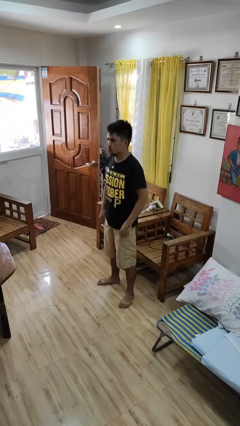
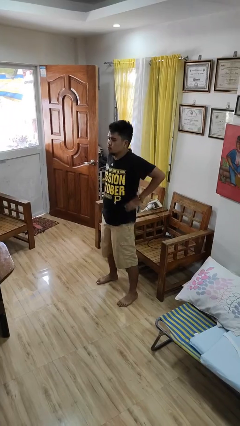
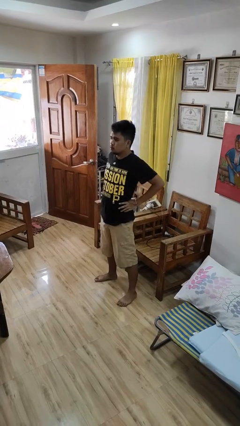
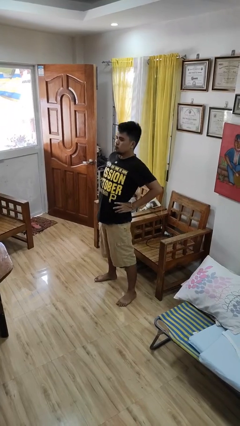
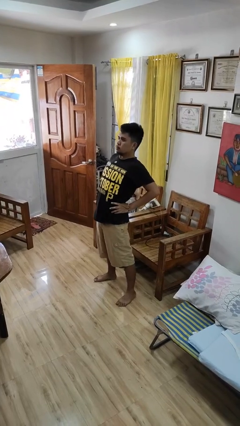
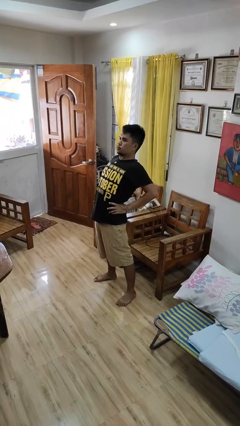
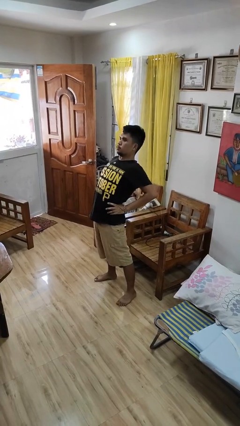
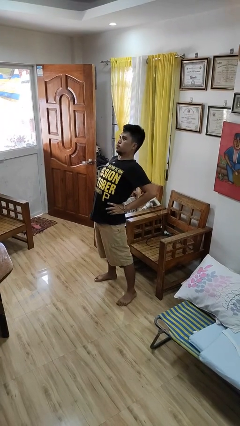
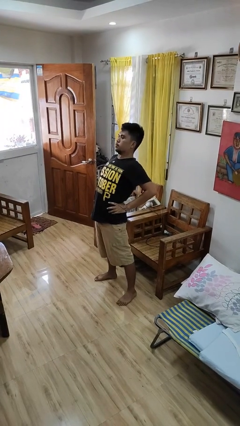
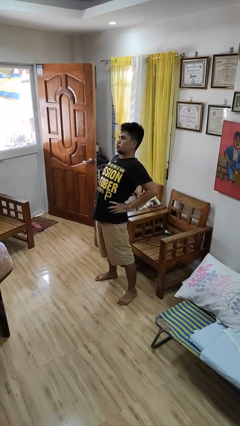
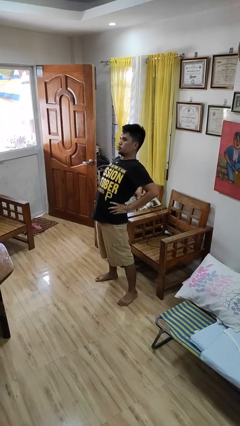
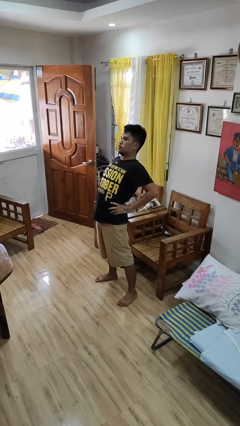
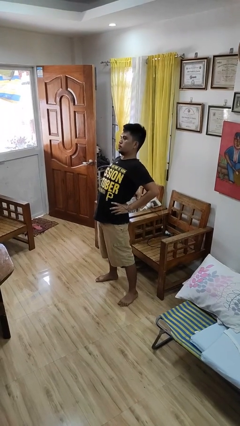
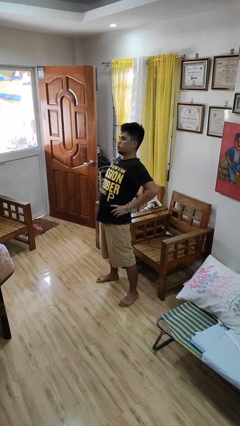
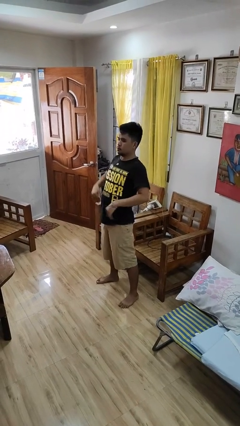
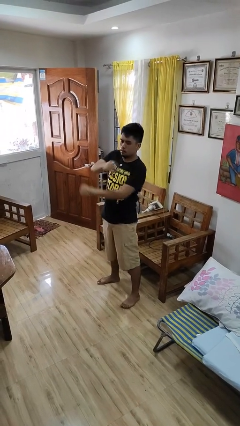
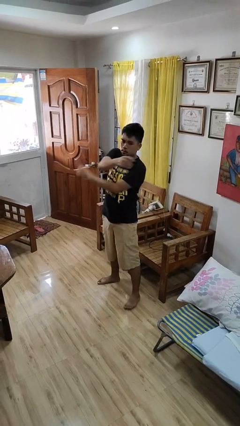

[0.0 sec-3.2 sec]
person stretches back

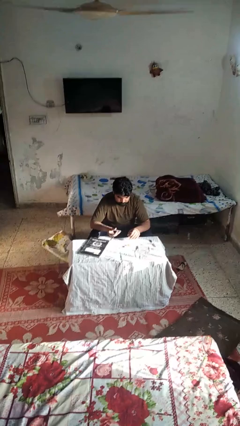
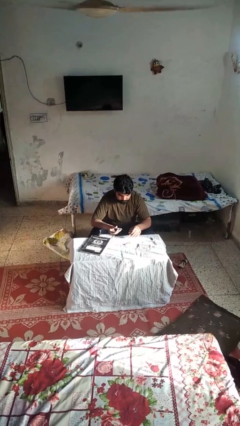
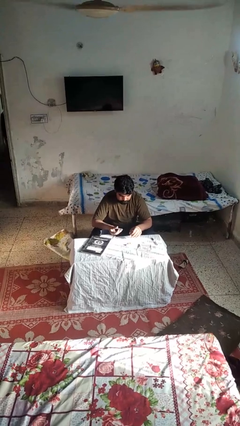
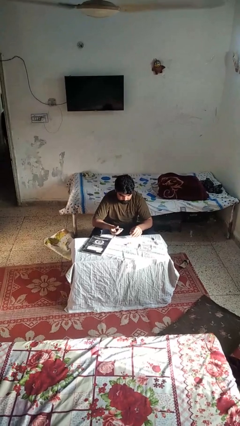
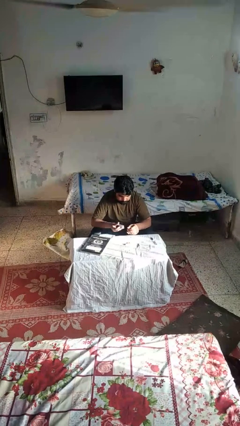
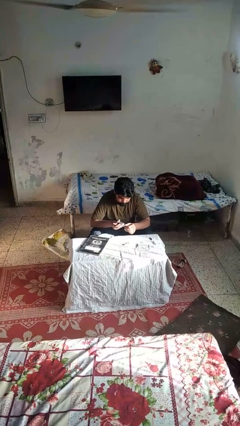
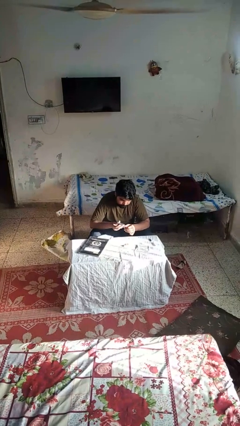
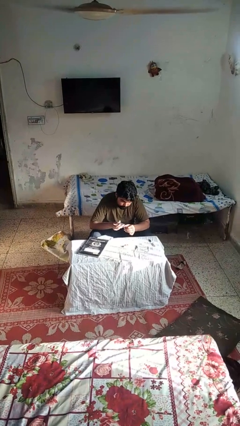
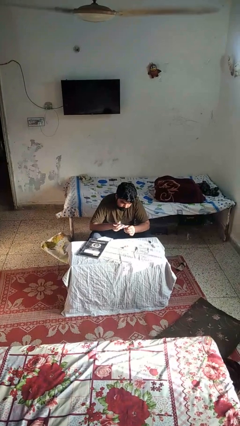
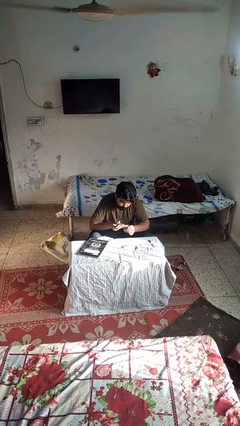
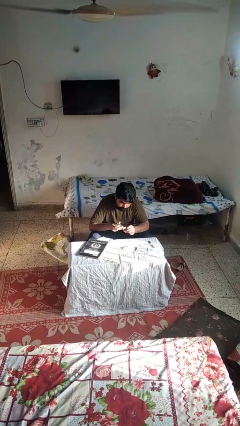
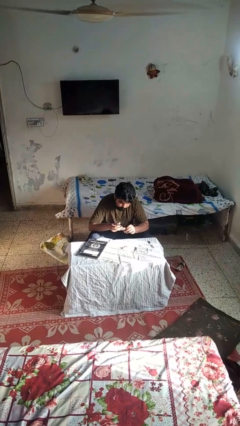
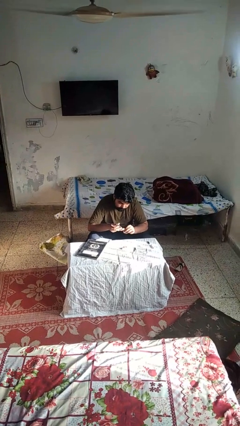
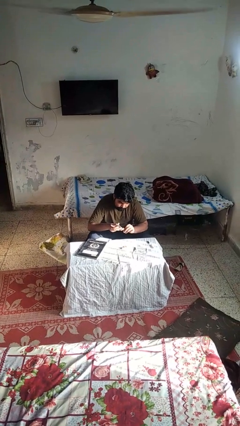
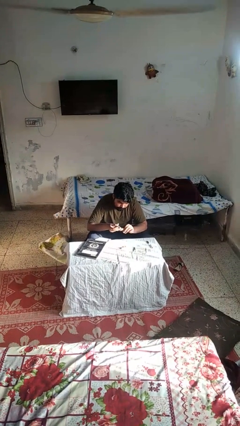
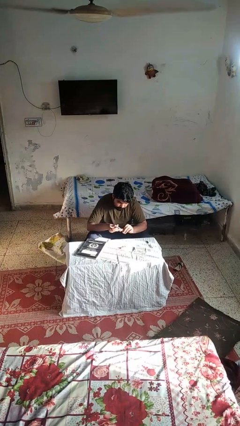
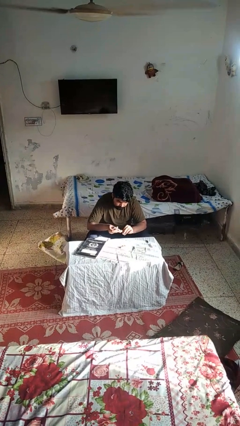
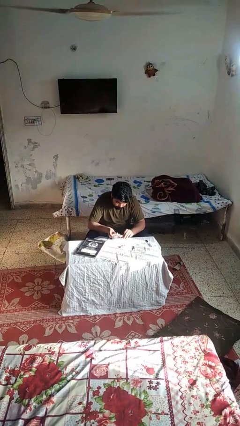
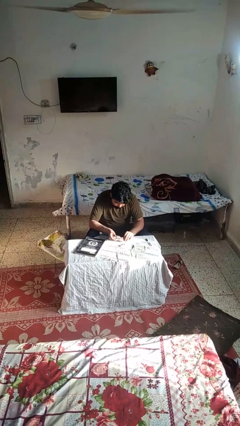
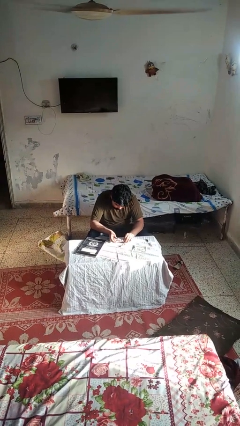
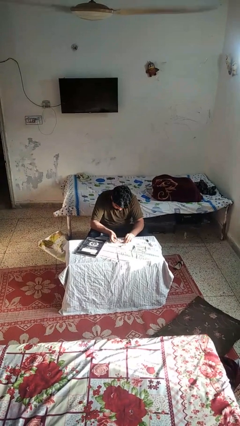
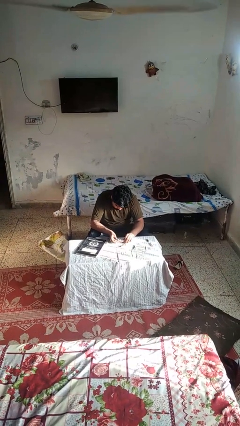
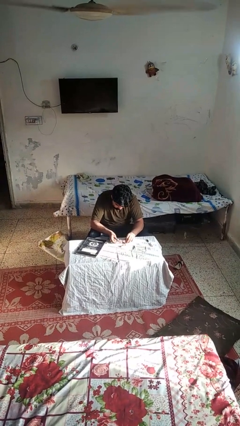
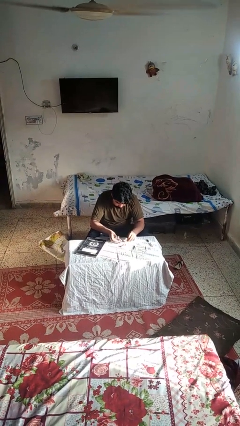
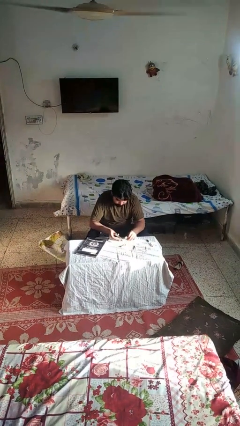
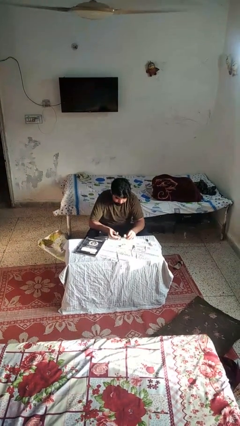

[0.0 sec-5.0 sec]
person clips fingernails

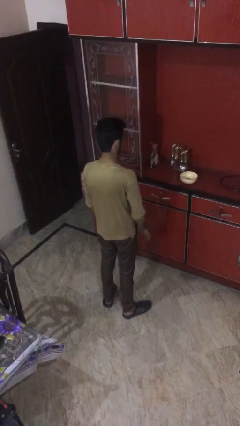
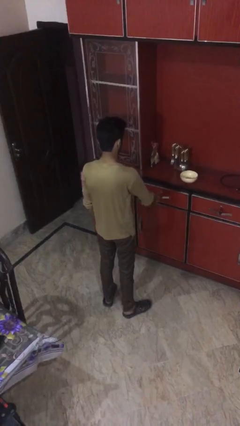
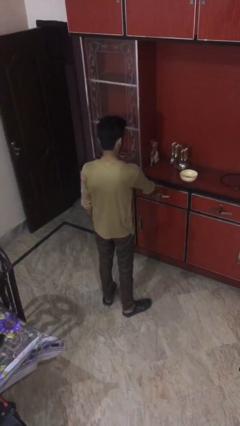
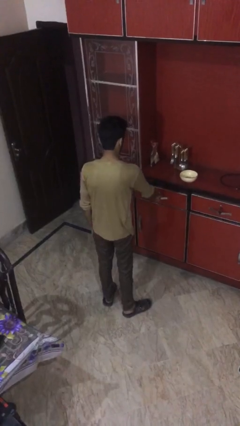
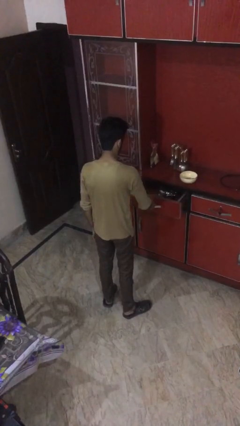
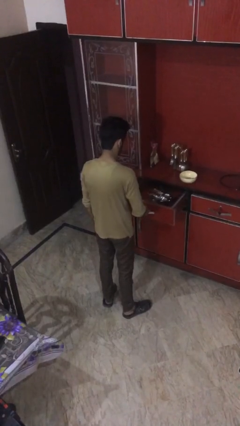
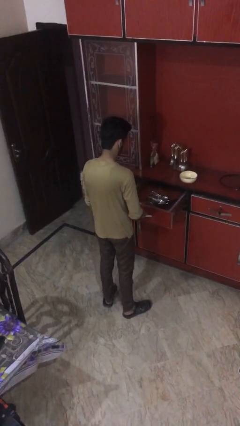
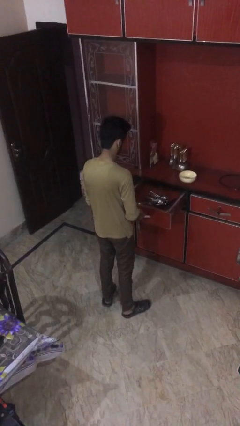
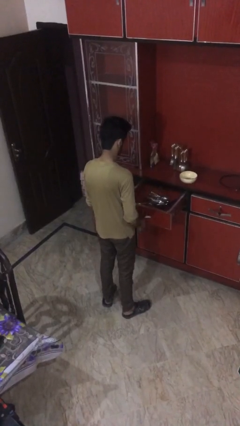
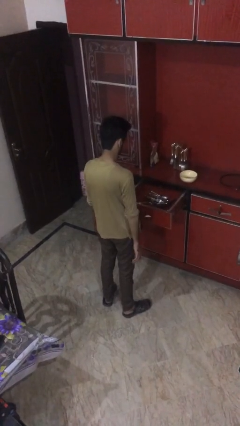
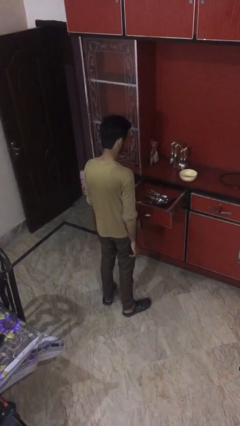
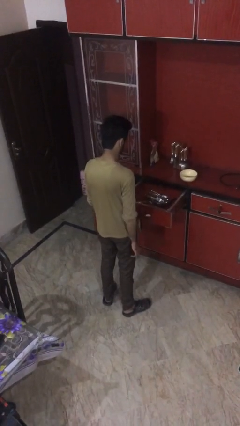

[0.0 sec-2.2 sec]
person opens kitchen drawer

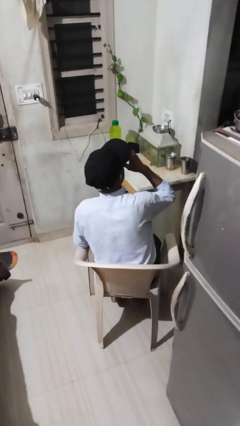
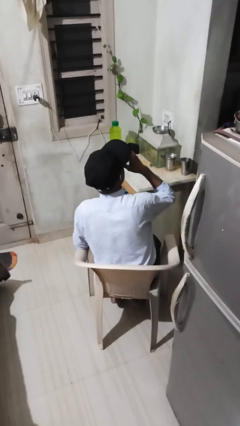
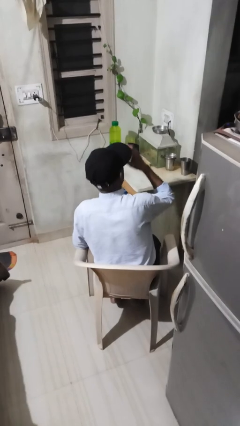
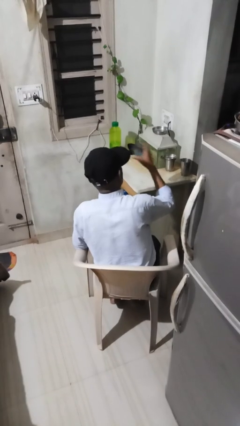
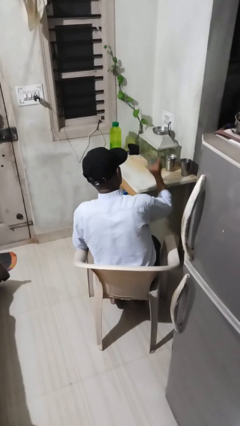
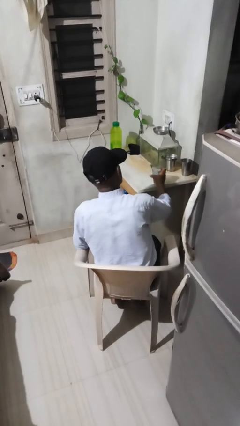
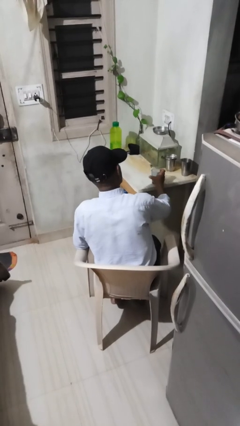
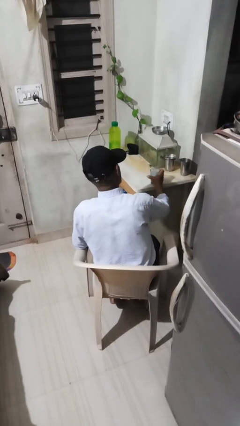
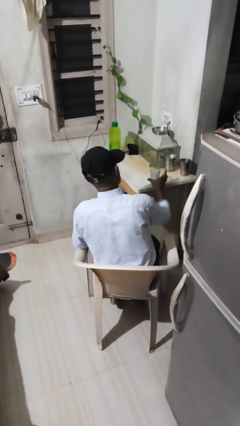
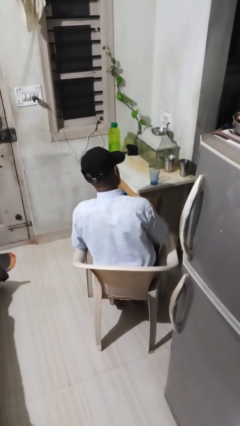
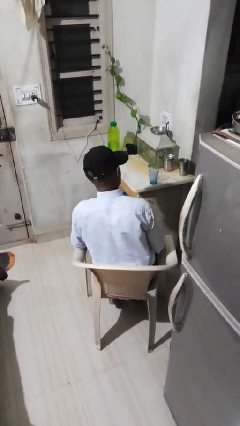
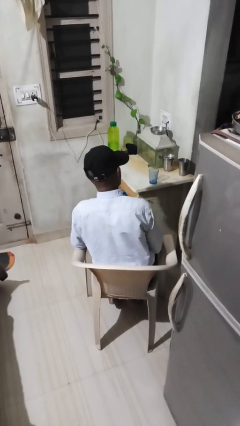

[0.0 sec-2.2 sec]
person puts down object on table

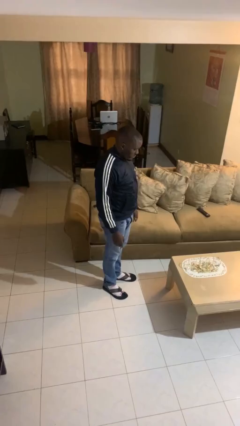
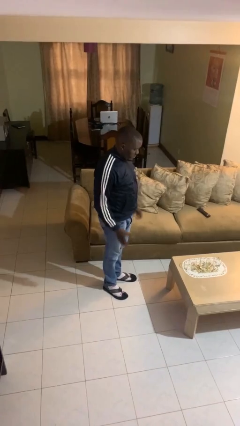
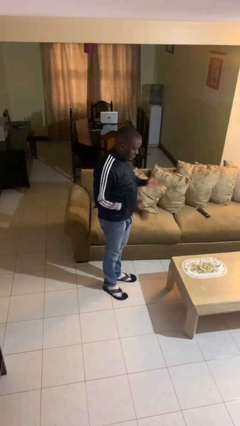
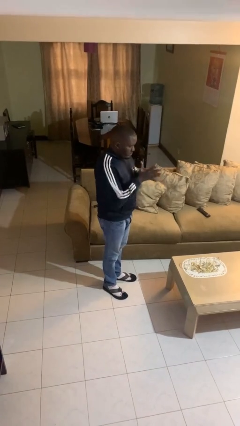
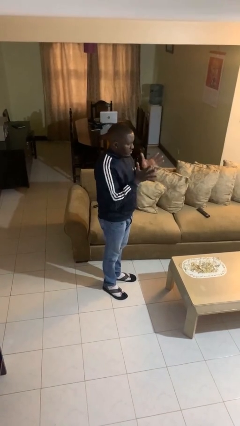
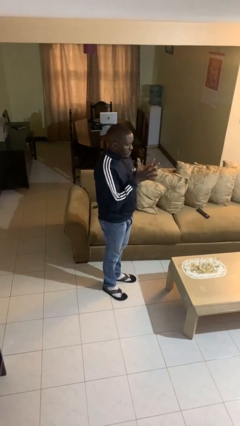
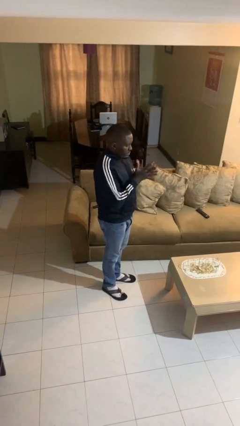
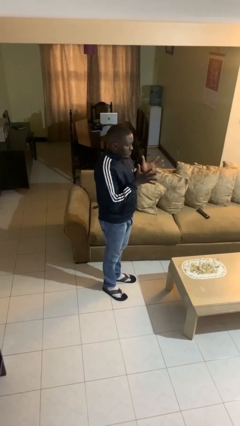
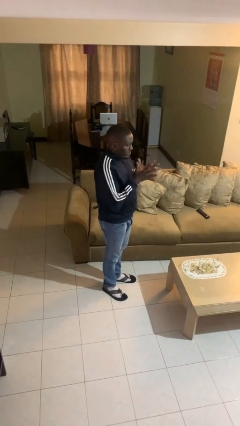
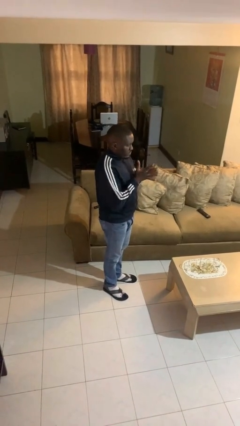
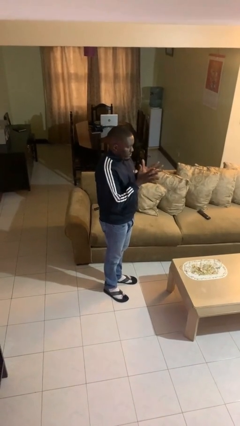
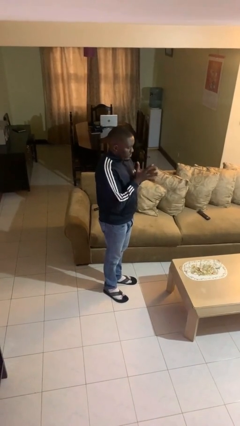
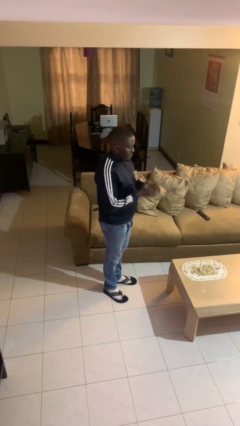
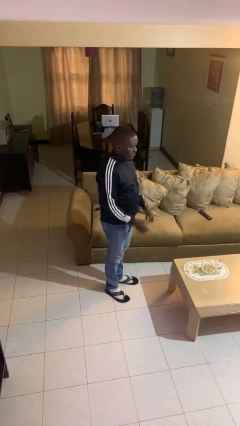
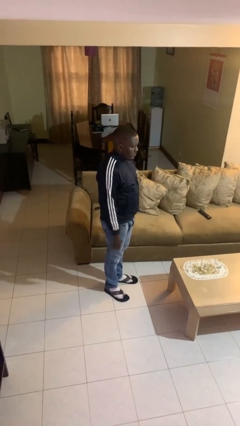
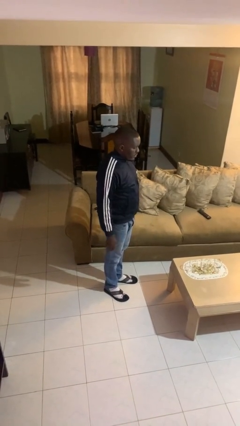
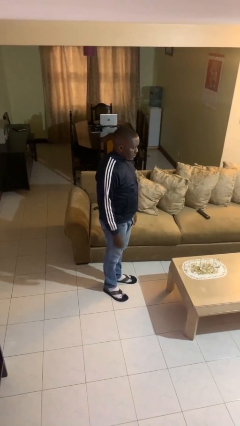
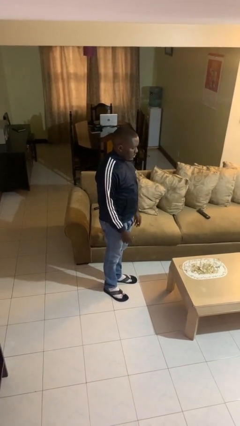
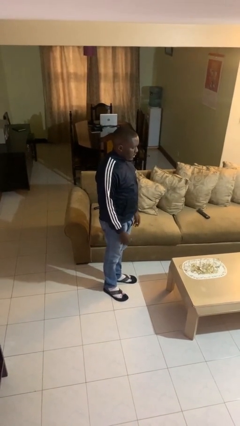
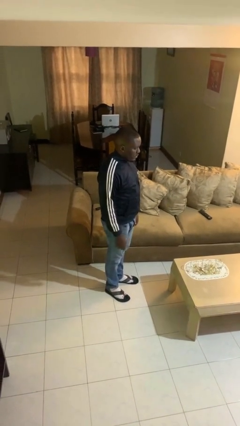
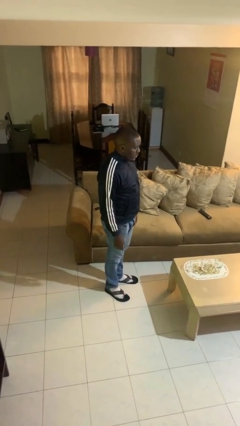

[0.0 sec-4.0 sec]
person claps hands

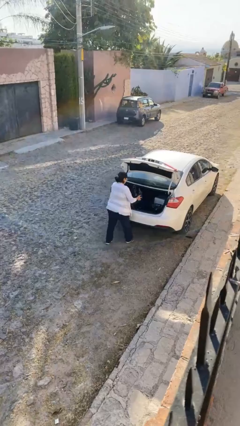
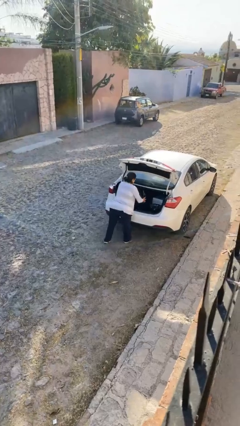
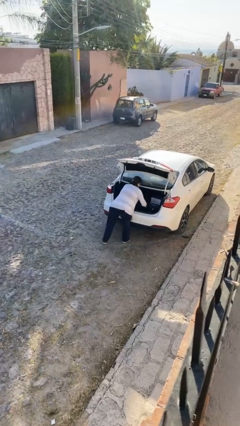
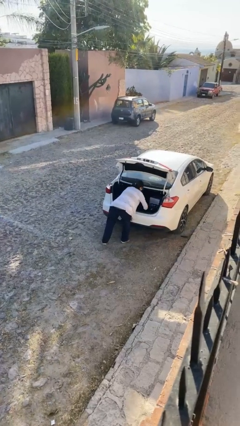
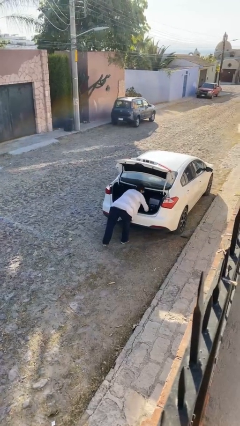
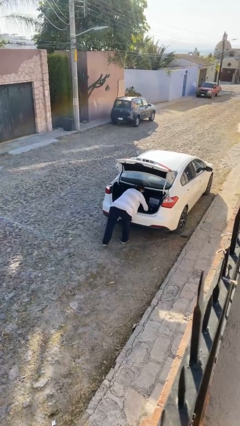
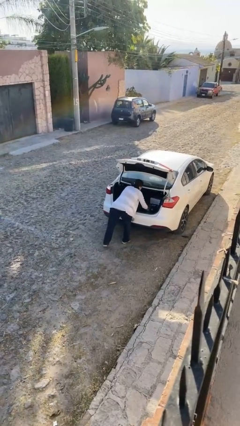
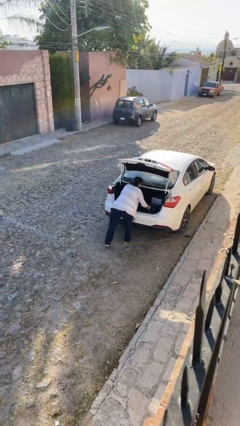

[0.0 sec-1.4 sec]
person loads car
